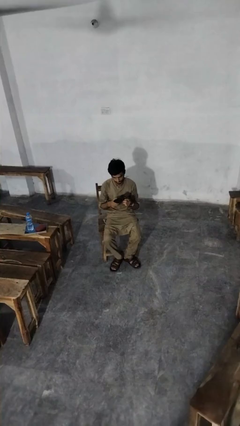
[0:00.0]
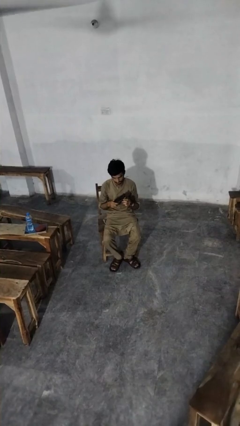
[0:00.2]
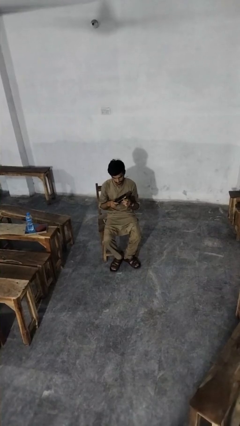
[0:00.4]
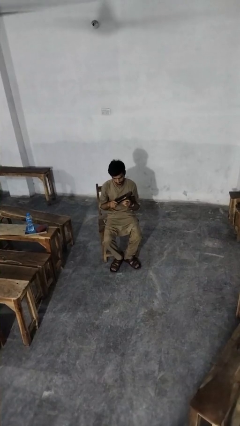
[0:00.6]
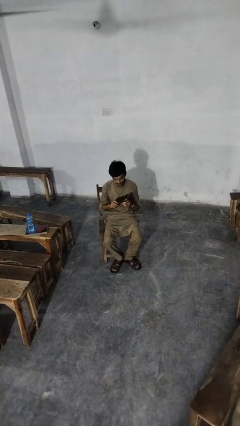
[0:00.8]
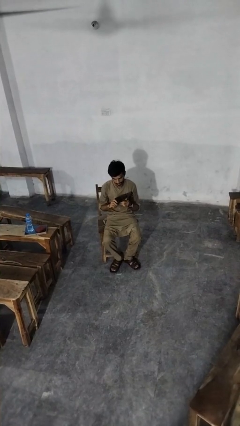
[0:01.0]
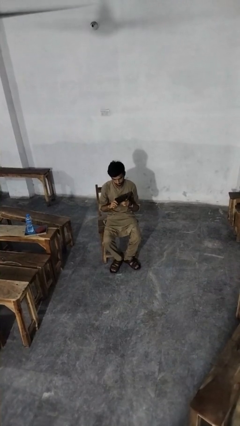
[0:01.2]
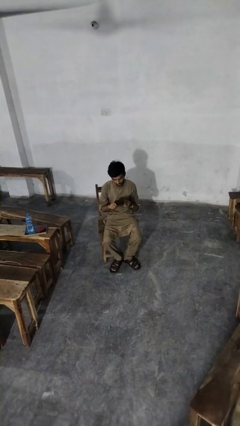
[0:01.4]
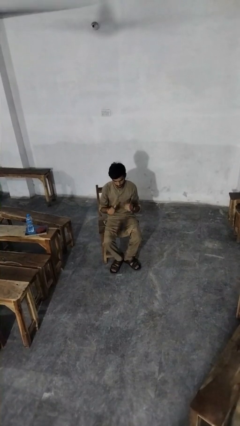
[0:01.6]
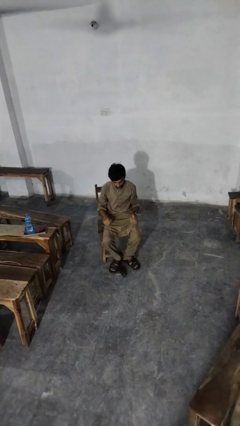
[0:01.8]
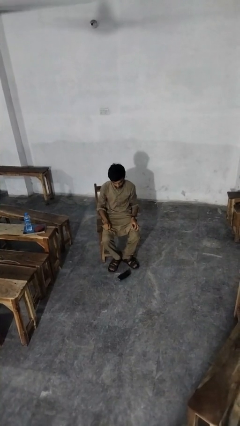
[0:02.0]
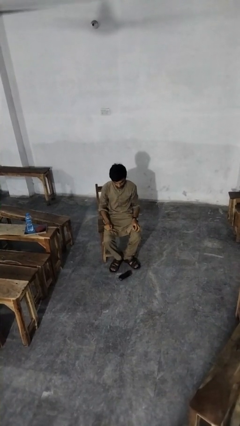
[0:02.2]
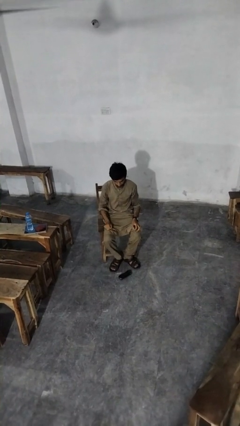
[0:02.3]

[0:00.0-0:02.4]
person drops object

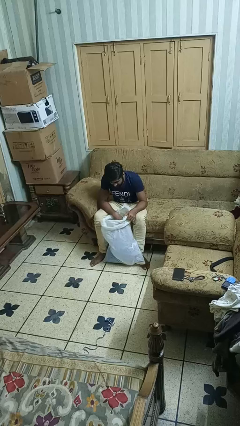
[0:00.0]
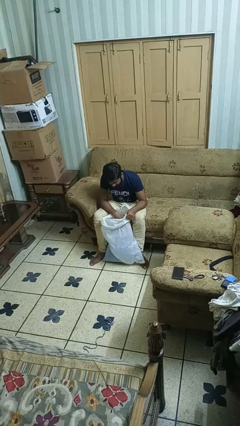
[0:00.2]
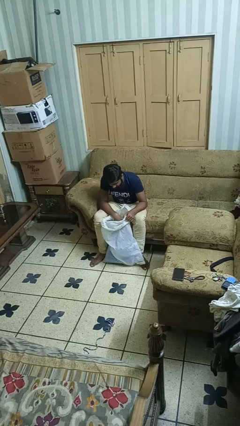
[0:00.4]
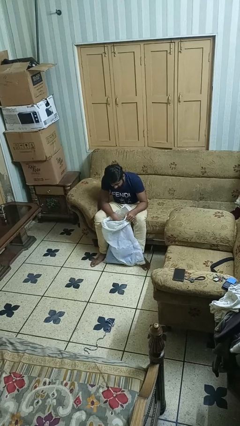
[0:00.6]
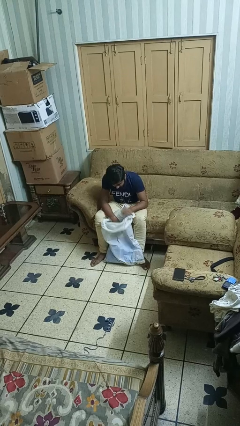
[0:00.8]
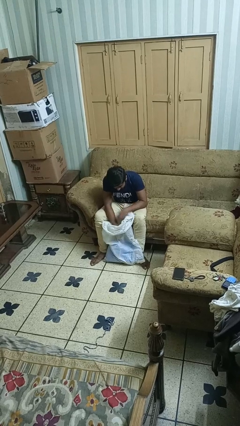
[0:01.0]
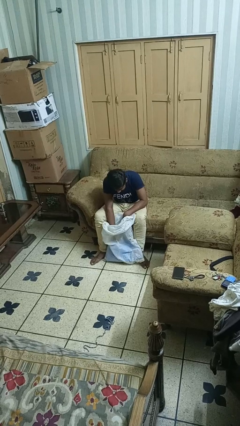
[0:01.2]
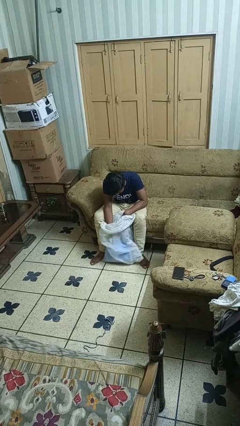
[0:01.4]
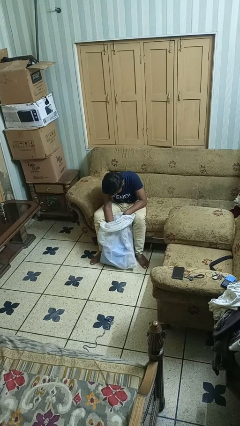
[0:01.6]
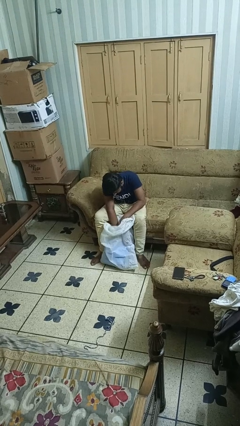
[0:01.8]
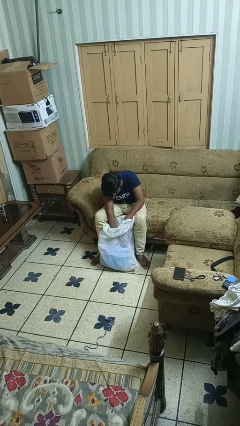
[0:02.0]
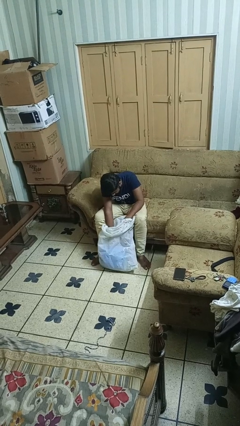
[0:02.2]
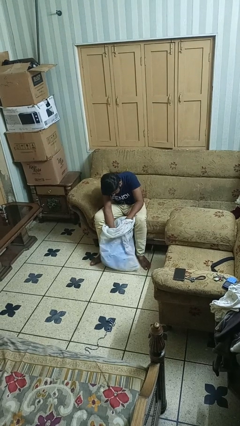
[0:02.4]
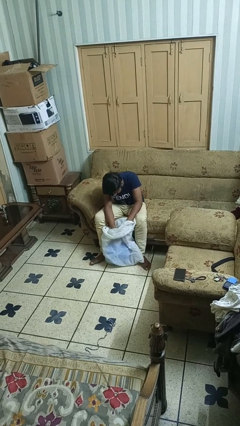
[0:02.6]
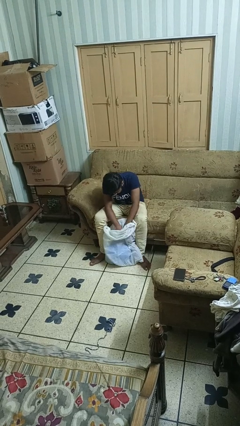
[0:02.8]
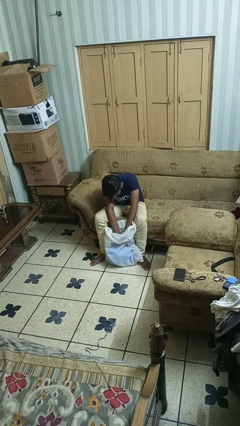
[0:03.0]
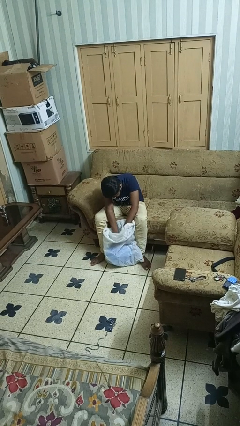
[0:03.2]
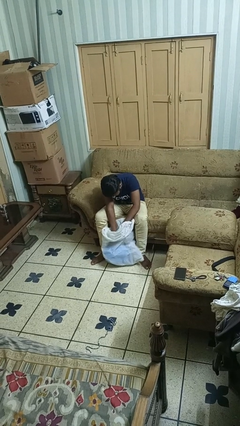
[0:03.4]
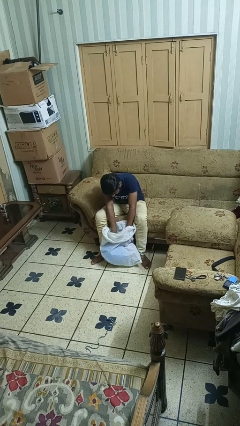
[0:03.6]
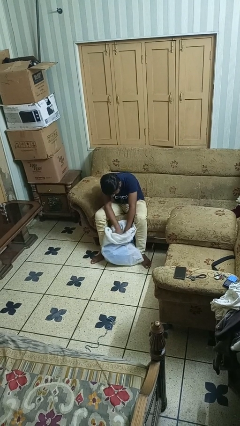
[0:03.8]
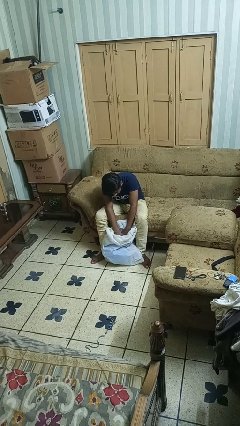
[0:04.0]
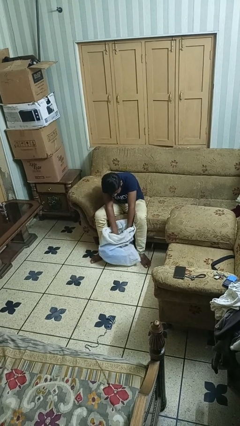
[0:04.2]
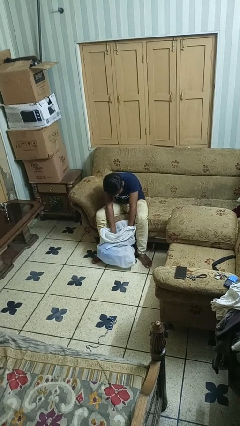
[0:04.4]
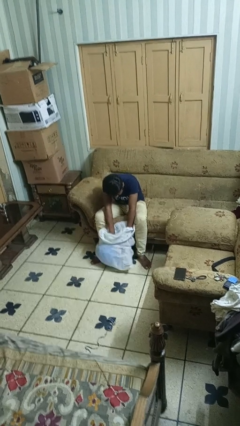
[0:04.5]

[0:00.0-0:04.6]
person searches in bag

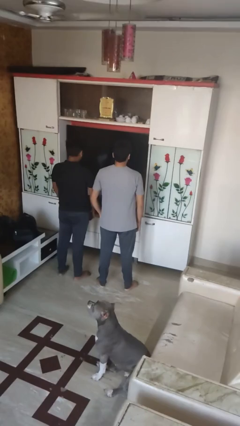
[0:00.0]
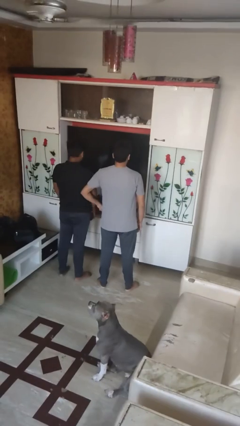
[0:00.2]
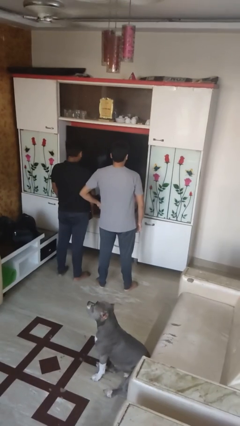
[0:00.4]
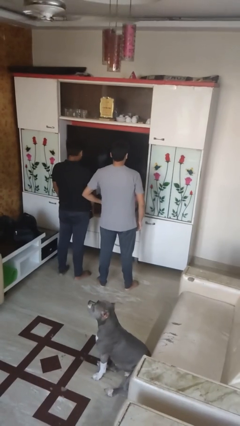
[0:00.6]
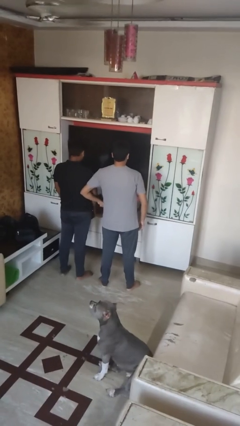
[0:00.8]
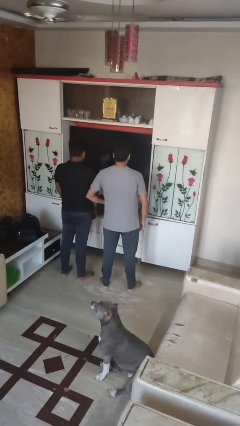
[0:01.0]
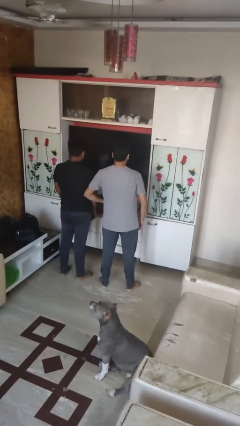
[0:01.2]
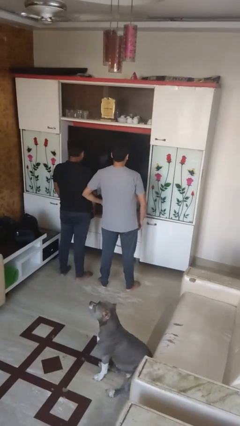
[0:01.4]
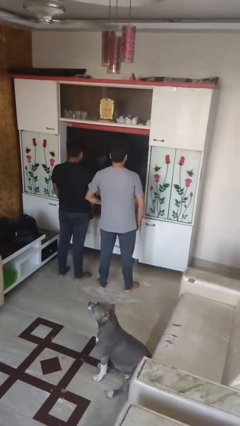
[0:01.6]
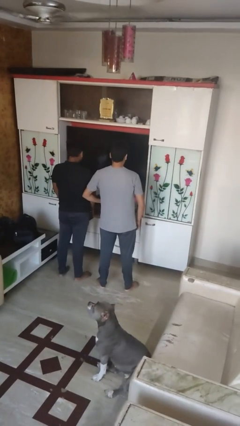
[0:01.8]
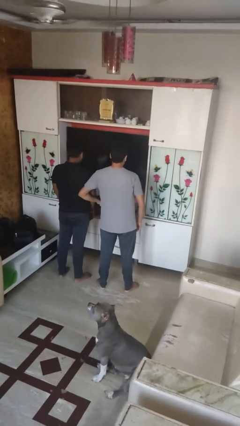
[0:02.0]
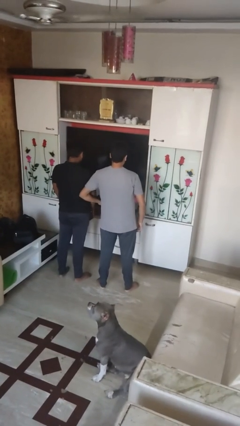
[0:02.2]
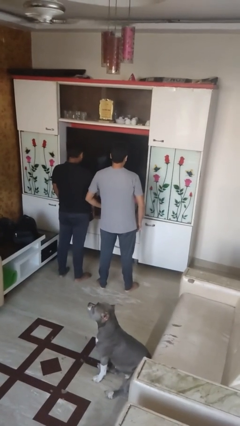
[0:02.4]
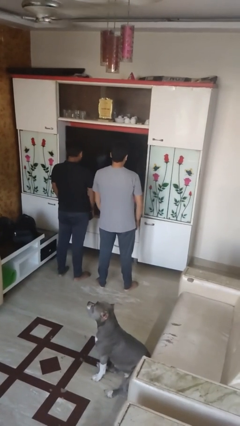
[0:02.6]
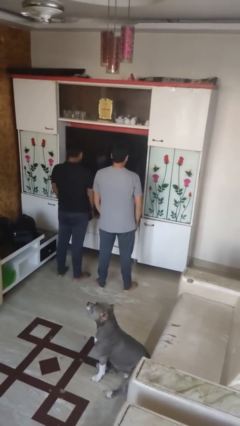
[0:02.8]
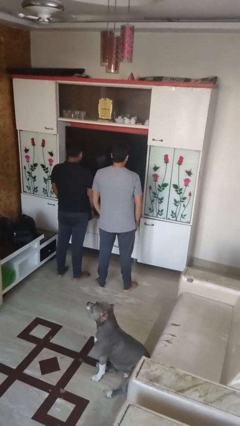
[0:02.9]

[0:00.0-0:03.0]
person nudges person with elbow

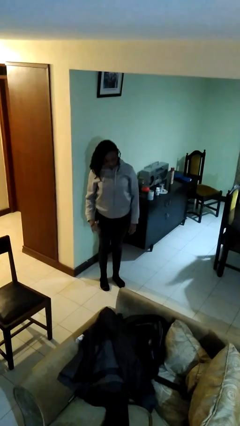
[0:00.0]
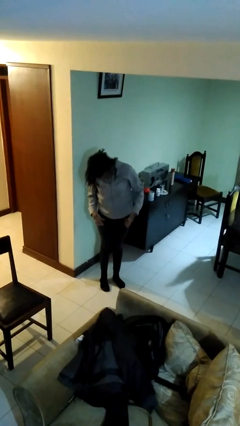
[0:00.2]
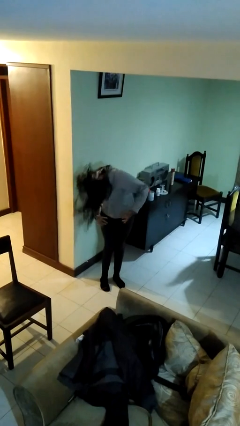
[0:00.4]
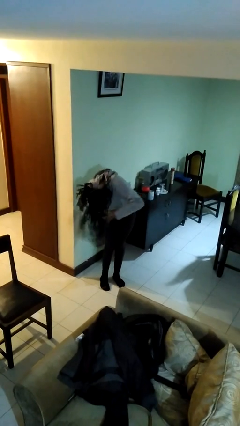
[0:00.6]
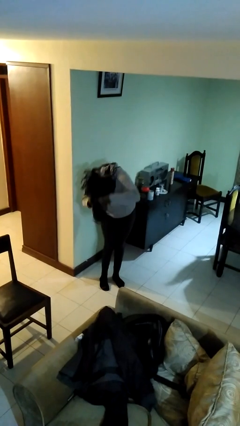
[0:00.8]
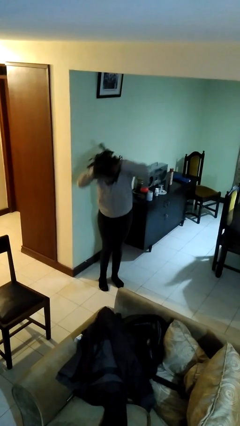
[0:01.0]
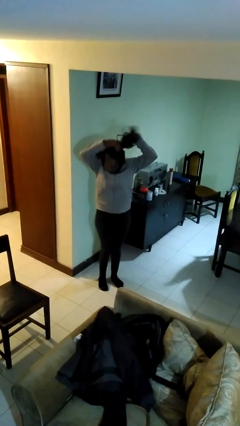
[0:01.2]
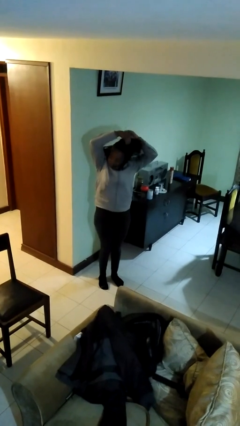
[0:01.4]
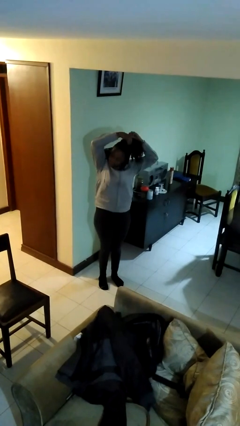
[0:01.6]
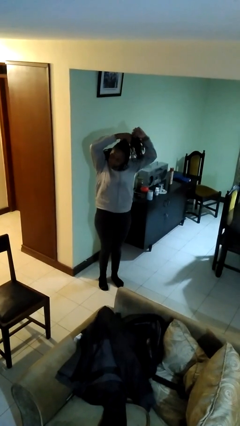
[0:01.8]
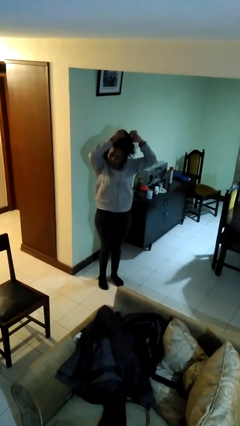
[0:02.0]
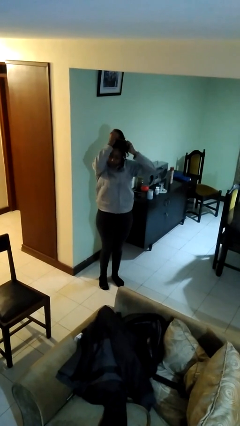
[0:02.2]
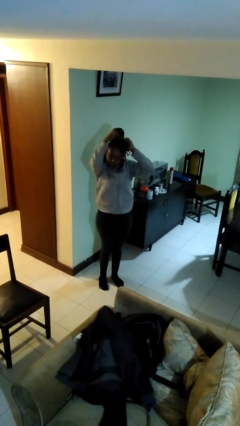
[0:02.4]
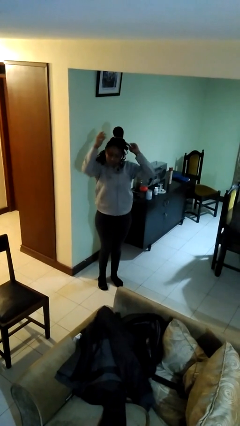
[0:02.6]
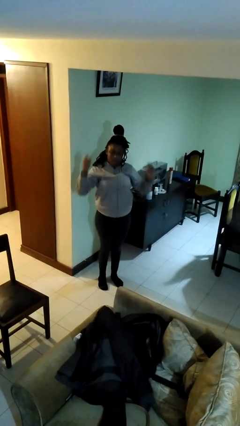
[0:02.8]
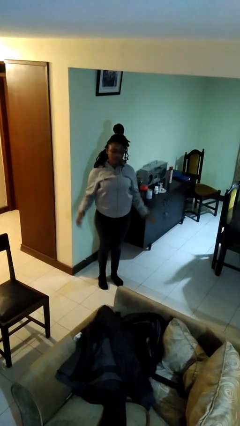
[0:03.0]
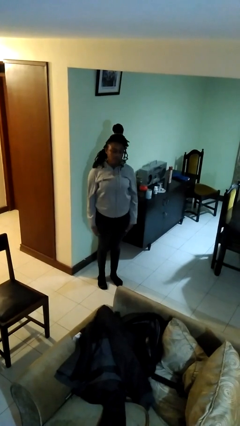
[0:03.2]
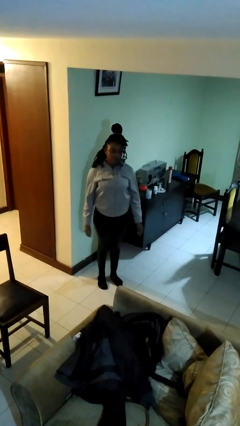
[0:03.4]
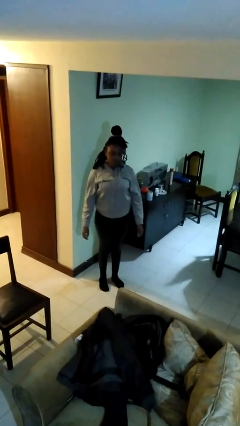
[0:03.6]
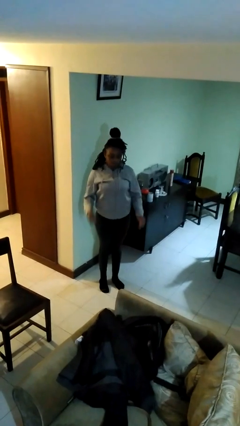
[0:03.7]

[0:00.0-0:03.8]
person puts hair in ponytail

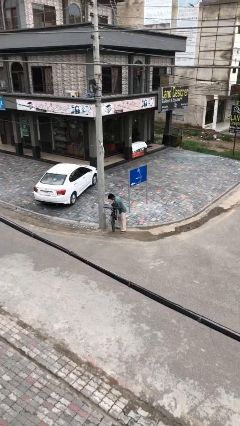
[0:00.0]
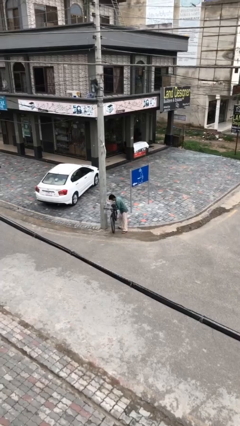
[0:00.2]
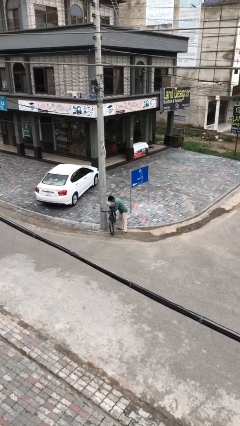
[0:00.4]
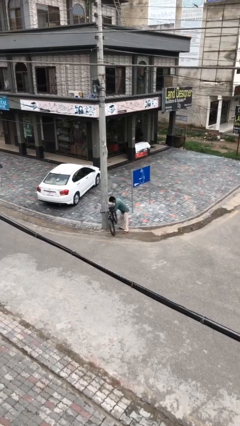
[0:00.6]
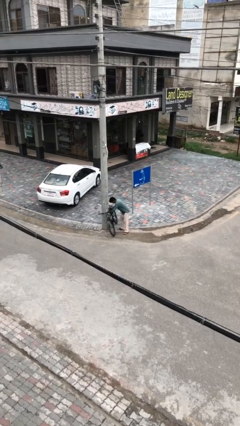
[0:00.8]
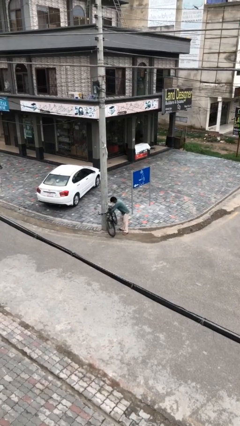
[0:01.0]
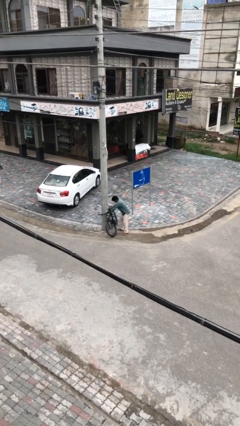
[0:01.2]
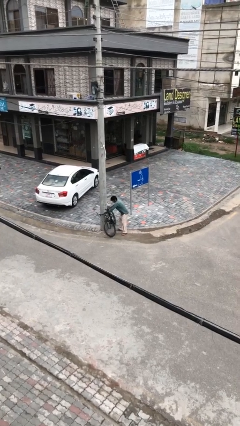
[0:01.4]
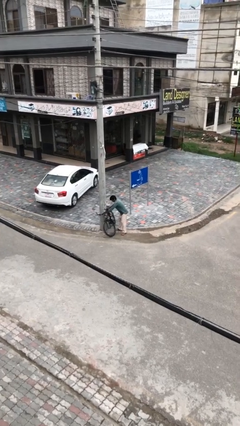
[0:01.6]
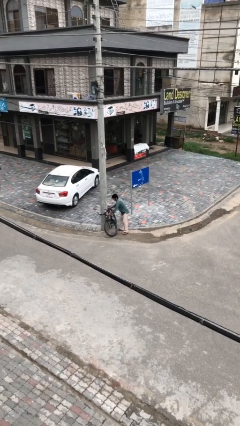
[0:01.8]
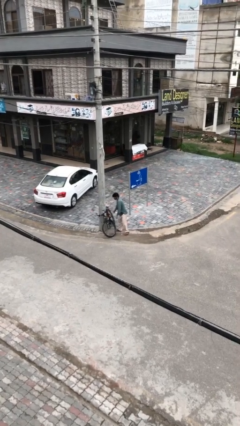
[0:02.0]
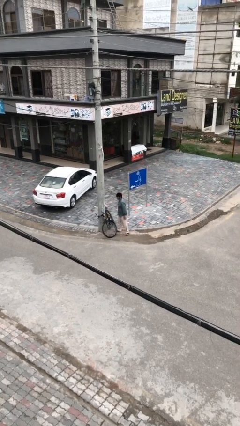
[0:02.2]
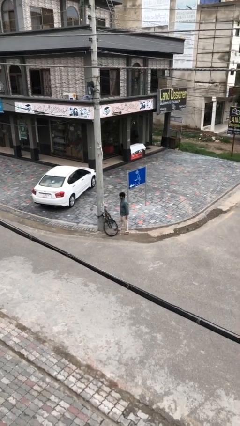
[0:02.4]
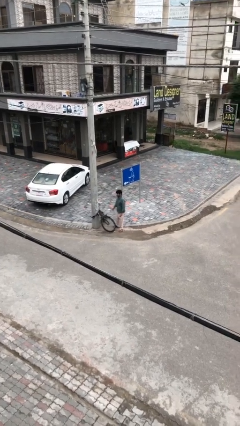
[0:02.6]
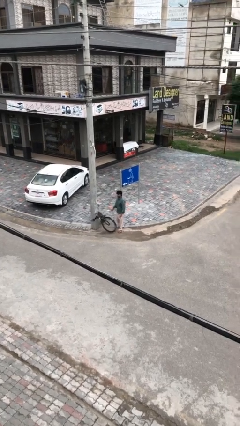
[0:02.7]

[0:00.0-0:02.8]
person puts down object on floor

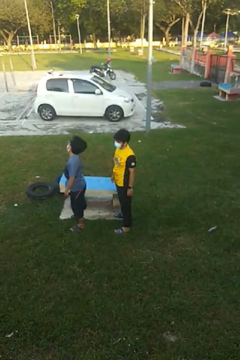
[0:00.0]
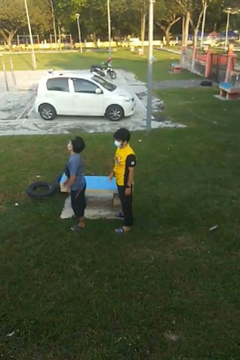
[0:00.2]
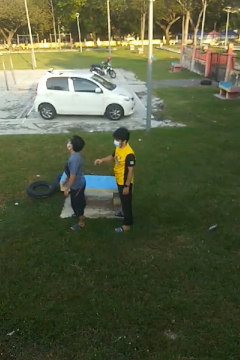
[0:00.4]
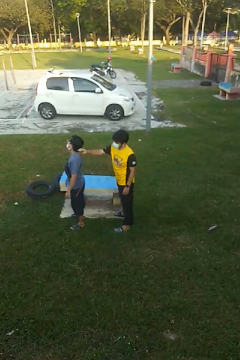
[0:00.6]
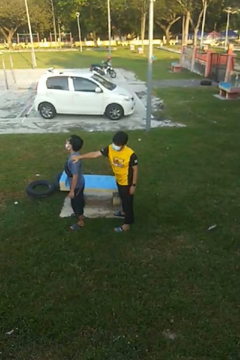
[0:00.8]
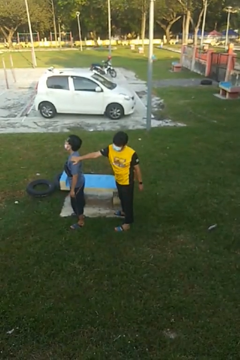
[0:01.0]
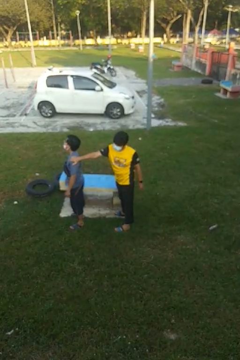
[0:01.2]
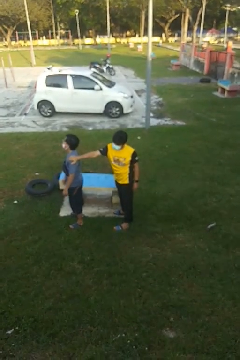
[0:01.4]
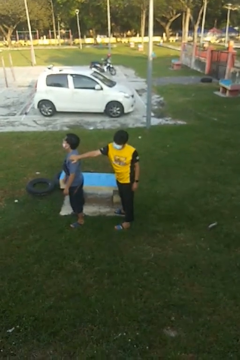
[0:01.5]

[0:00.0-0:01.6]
person grabs person by shoulder
